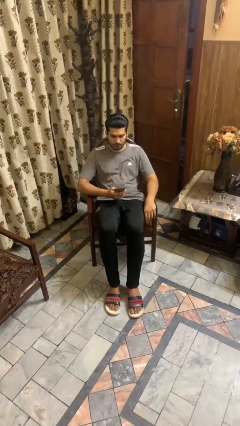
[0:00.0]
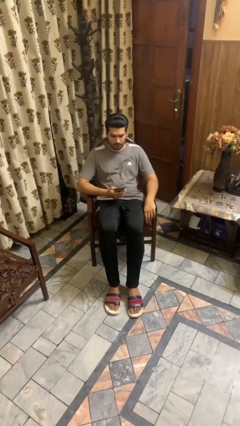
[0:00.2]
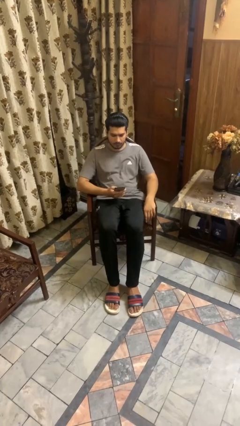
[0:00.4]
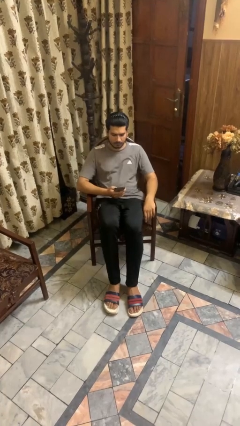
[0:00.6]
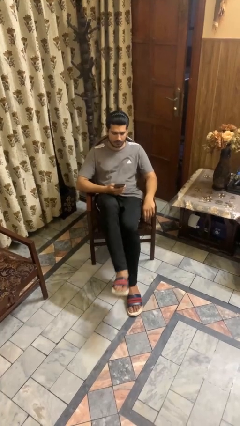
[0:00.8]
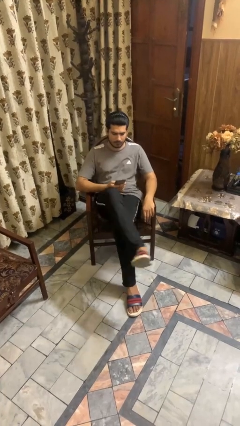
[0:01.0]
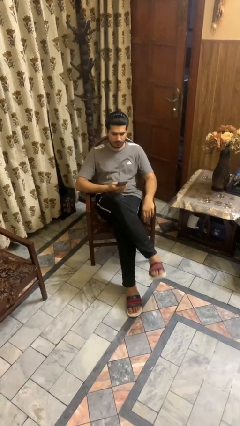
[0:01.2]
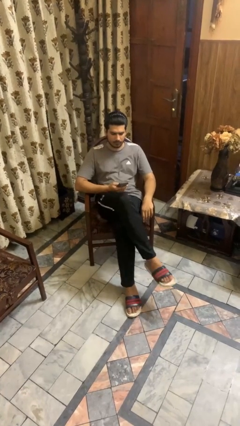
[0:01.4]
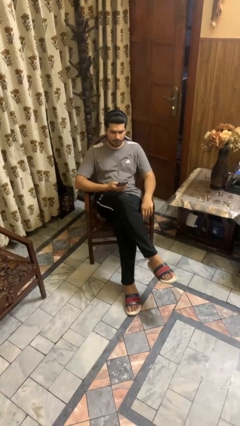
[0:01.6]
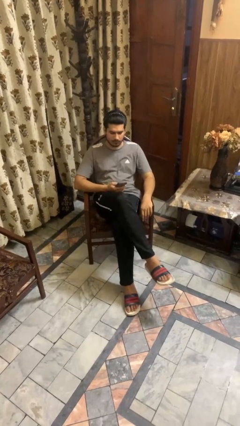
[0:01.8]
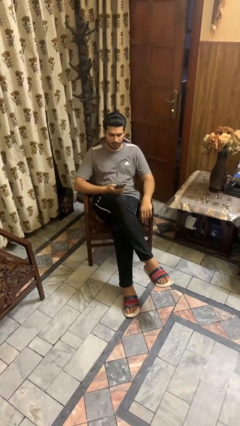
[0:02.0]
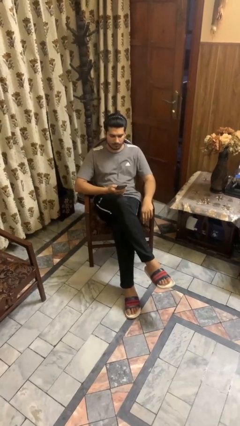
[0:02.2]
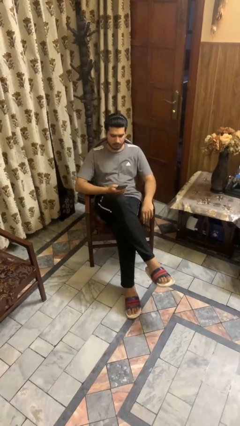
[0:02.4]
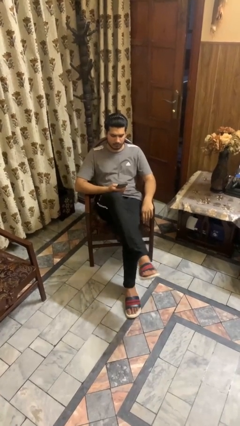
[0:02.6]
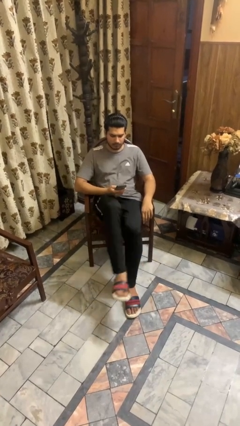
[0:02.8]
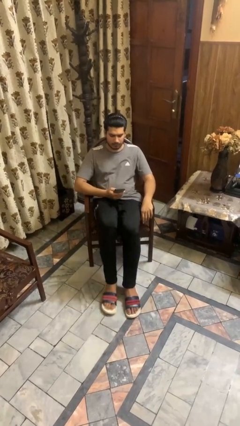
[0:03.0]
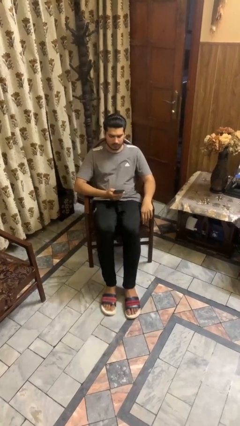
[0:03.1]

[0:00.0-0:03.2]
person crosses legs

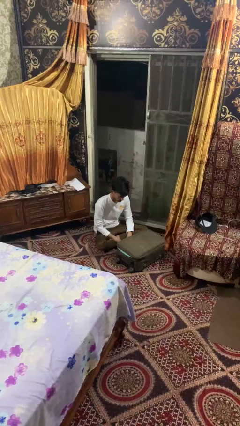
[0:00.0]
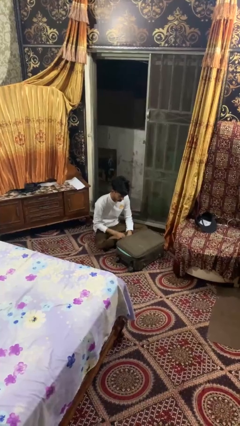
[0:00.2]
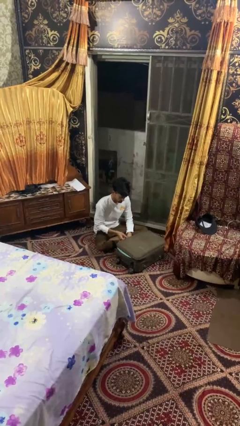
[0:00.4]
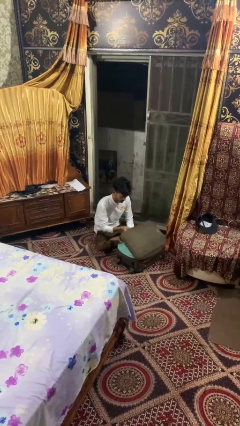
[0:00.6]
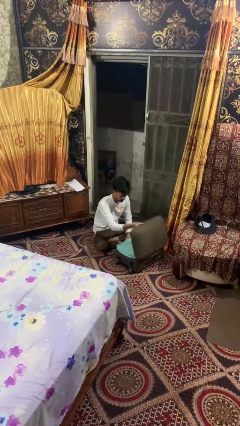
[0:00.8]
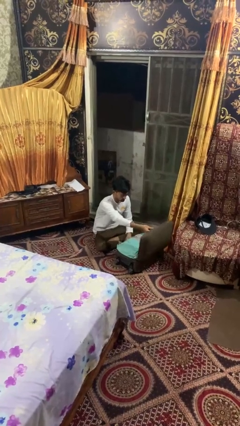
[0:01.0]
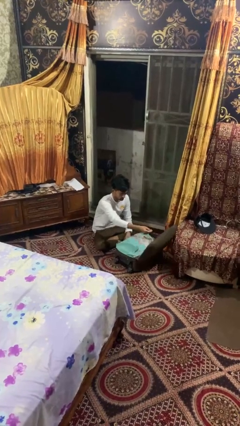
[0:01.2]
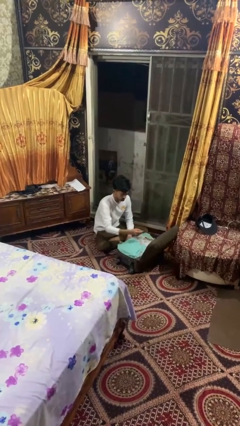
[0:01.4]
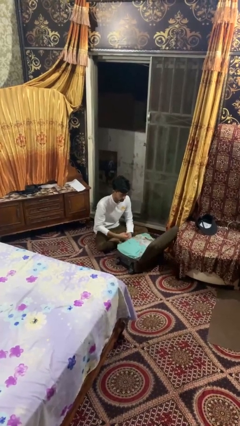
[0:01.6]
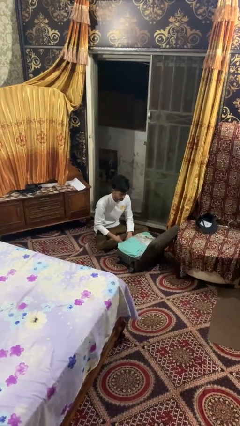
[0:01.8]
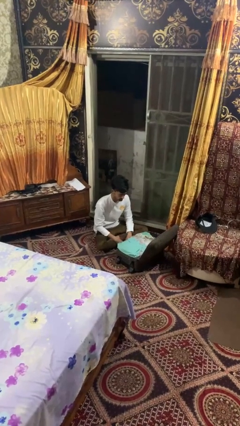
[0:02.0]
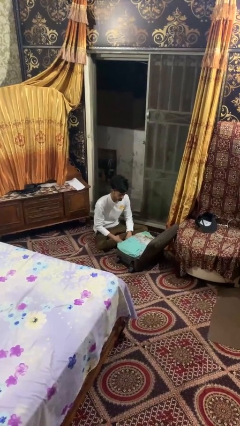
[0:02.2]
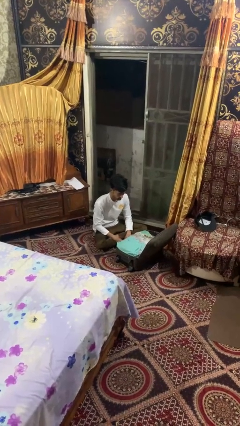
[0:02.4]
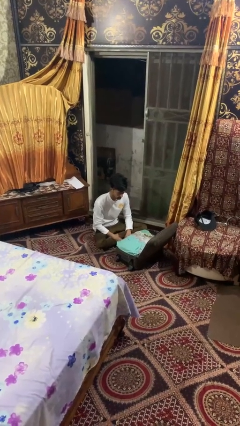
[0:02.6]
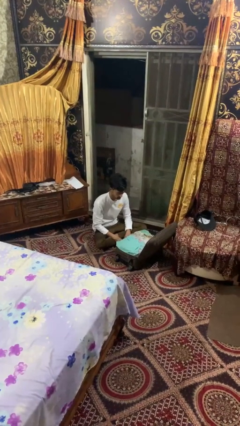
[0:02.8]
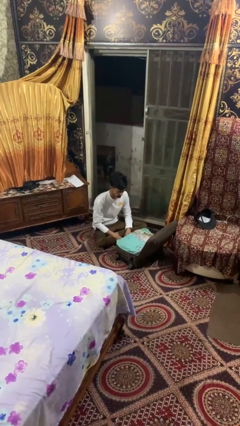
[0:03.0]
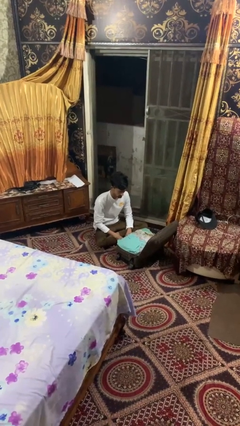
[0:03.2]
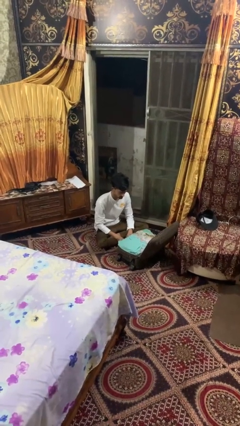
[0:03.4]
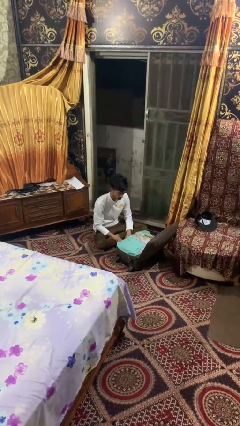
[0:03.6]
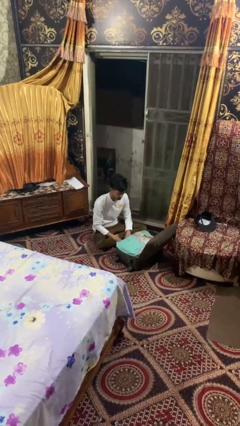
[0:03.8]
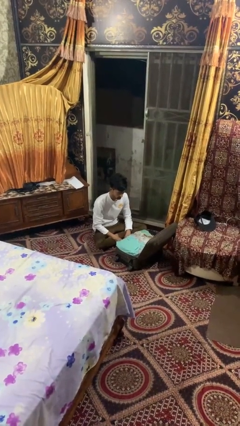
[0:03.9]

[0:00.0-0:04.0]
person opens suitcase

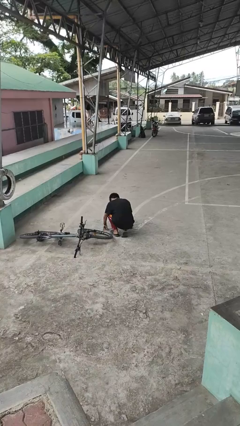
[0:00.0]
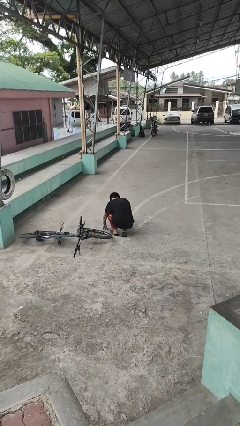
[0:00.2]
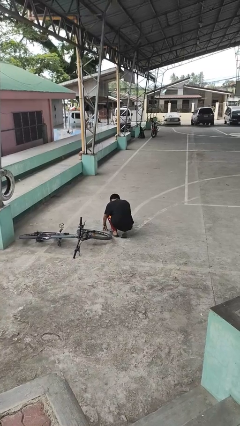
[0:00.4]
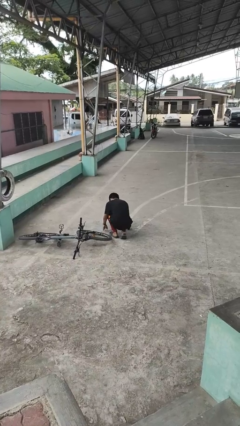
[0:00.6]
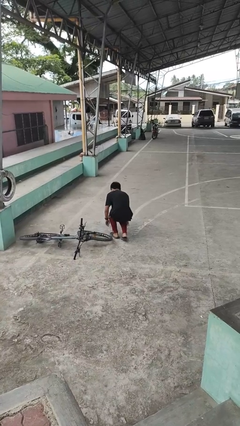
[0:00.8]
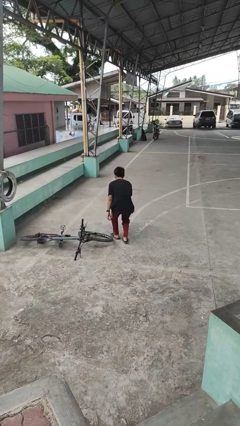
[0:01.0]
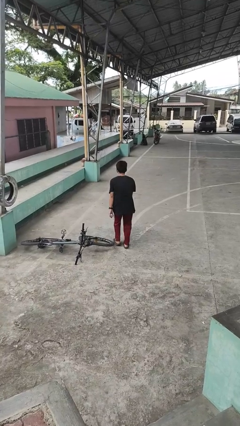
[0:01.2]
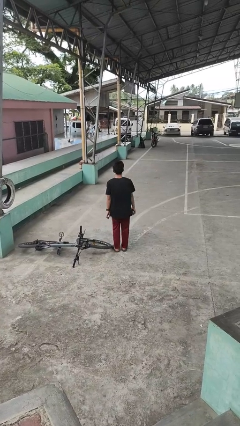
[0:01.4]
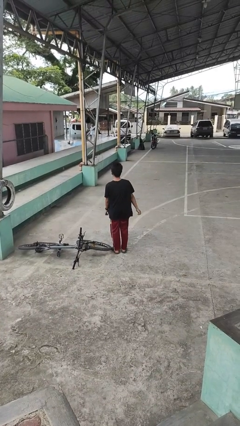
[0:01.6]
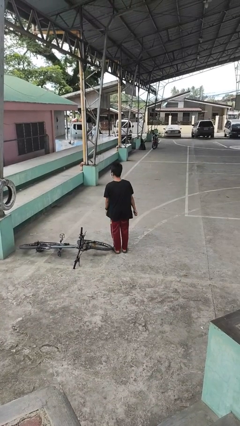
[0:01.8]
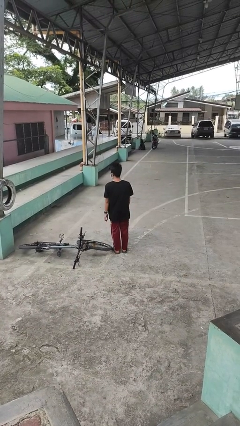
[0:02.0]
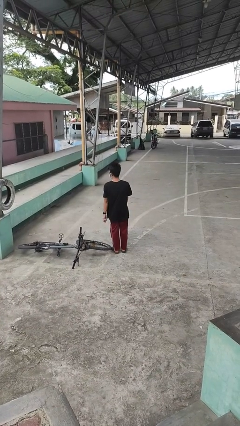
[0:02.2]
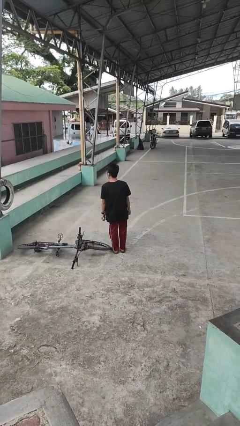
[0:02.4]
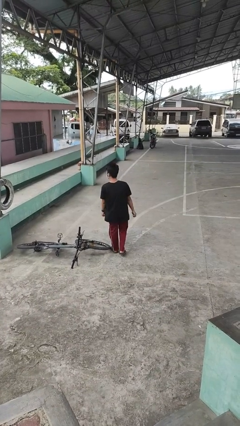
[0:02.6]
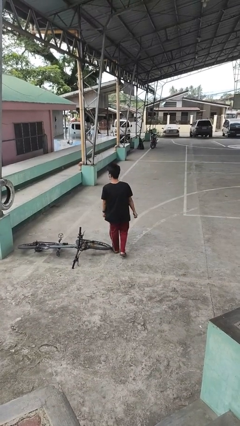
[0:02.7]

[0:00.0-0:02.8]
person stands up from floor

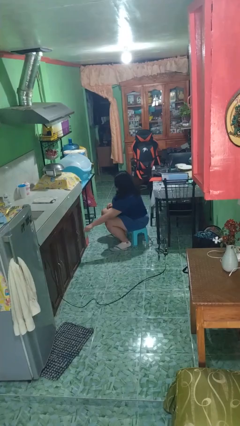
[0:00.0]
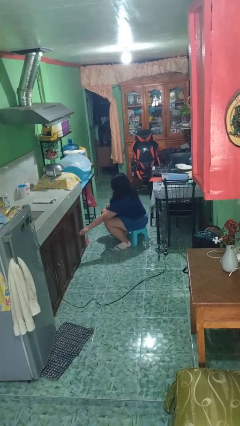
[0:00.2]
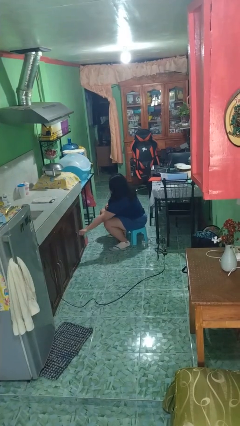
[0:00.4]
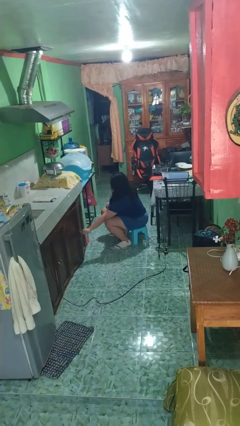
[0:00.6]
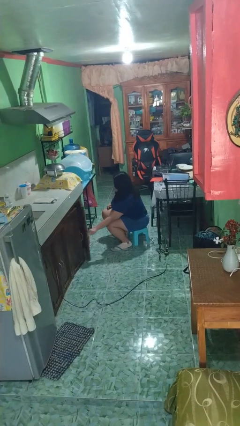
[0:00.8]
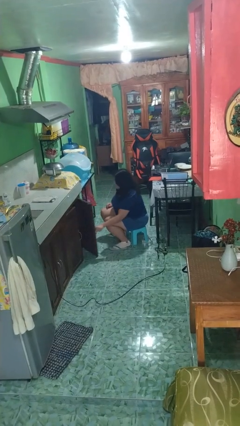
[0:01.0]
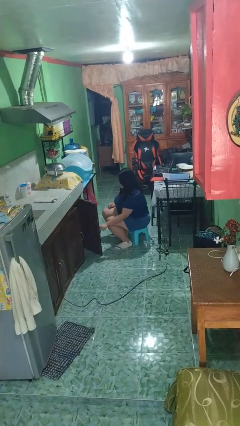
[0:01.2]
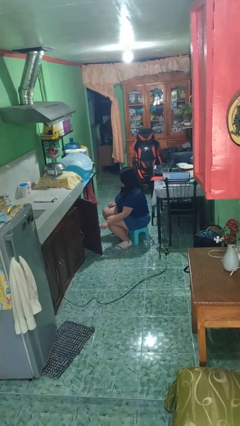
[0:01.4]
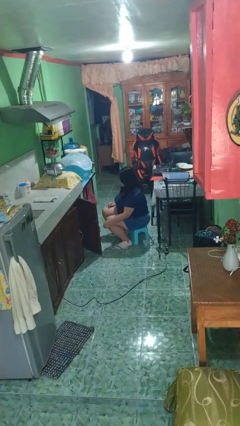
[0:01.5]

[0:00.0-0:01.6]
person opens cabinet

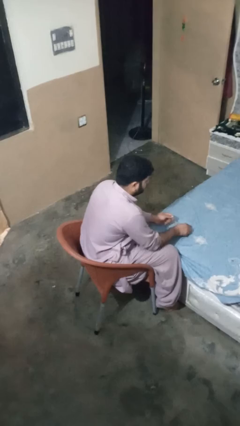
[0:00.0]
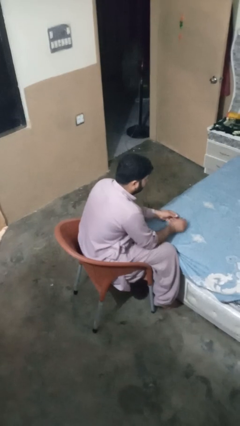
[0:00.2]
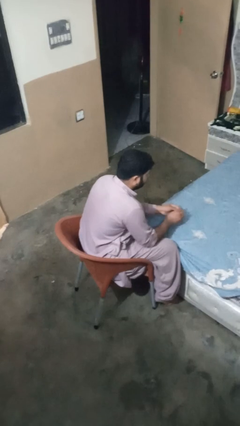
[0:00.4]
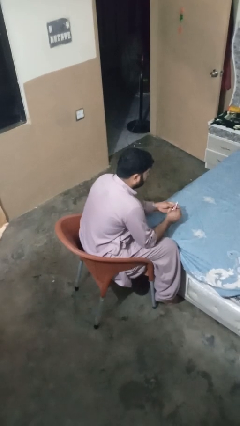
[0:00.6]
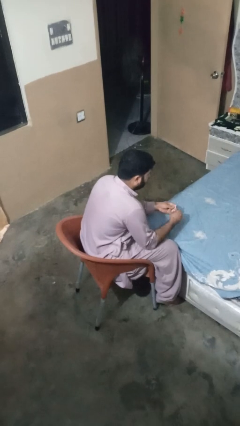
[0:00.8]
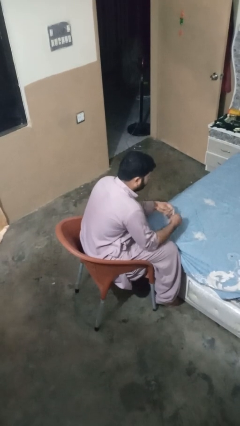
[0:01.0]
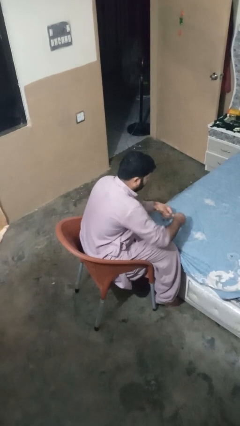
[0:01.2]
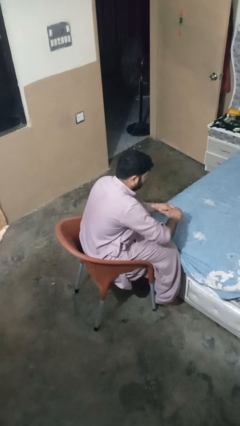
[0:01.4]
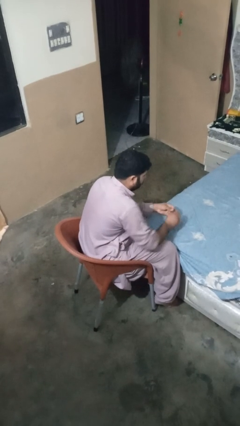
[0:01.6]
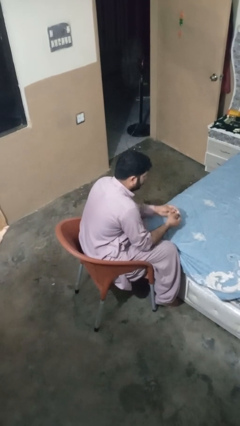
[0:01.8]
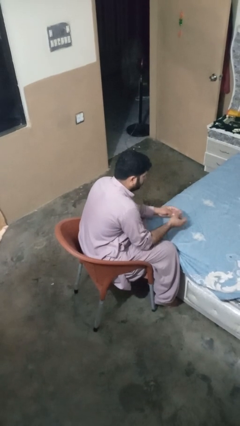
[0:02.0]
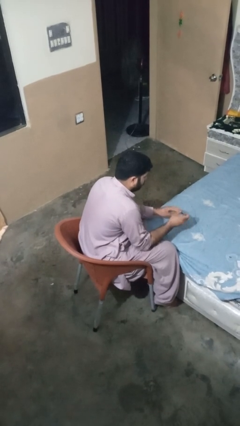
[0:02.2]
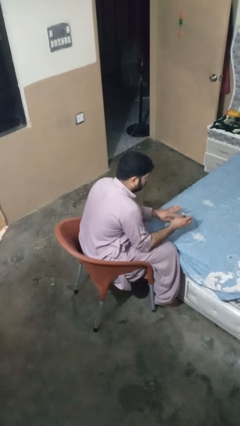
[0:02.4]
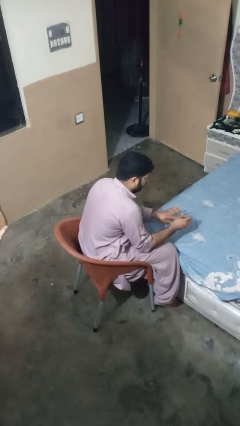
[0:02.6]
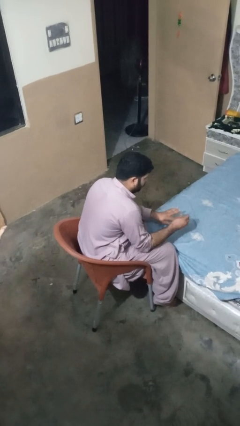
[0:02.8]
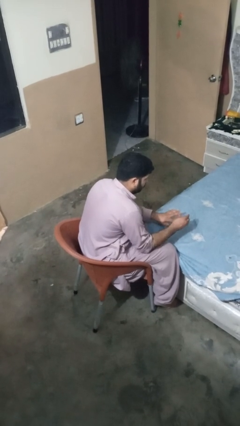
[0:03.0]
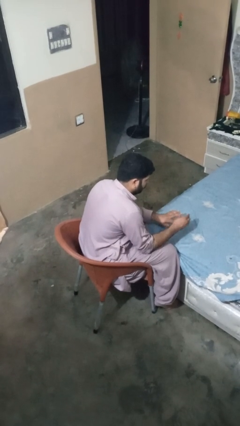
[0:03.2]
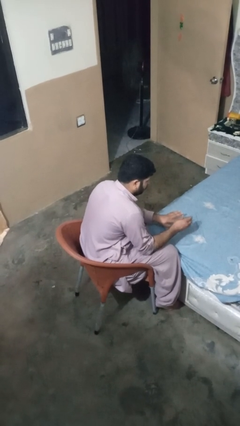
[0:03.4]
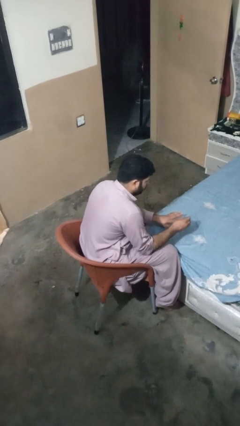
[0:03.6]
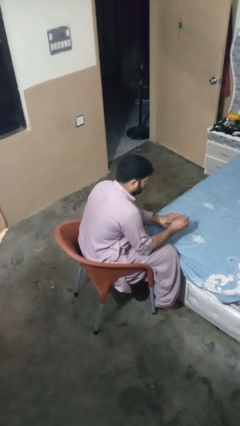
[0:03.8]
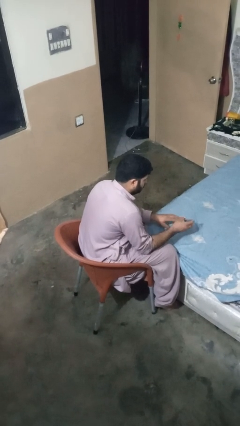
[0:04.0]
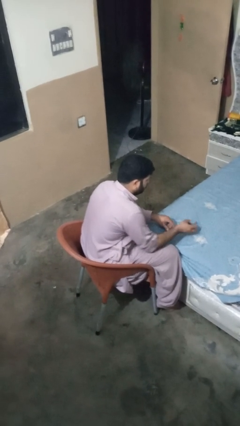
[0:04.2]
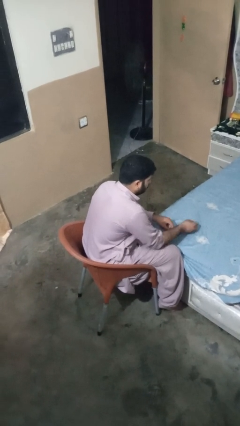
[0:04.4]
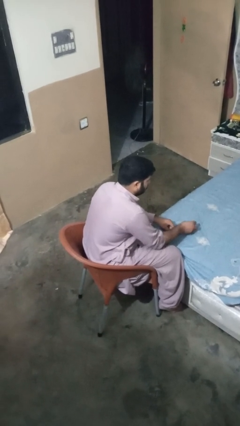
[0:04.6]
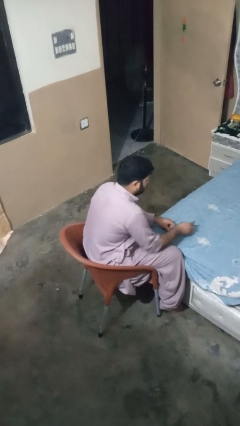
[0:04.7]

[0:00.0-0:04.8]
person clips fingernails

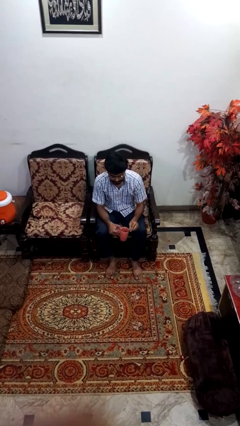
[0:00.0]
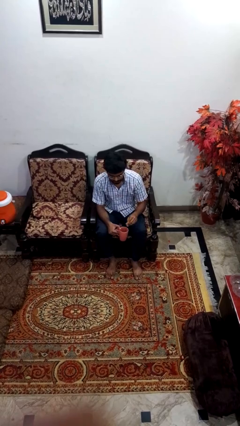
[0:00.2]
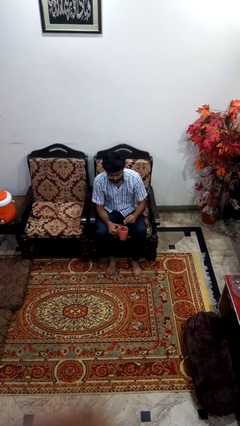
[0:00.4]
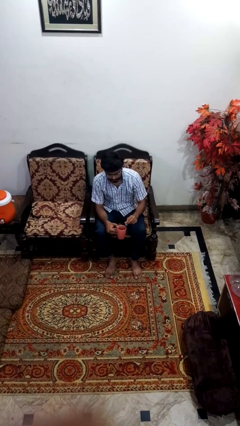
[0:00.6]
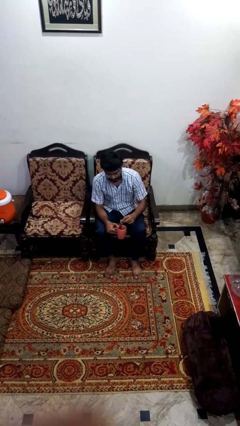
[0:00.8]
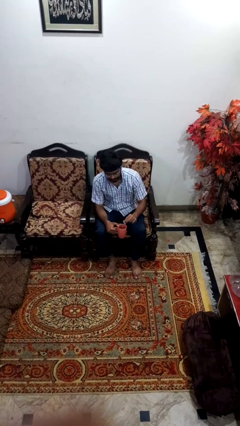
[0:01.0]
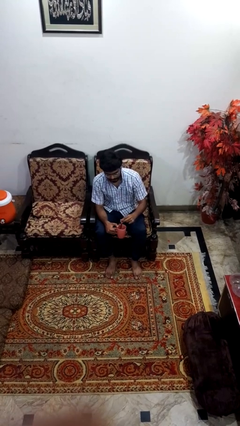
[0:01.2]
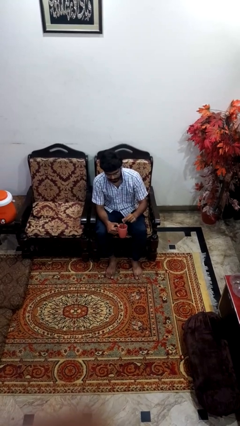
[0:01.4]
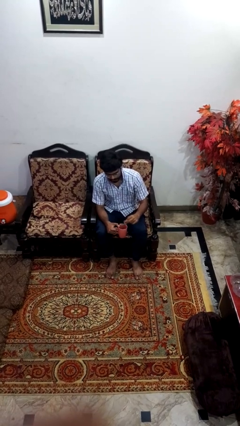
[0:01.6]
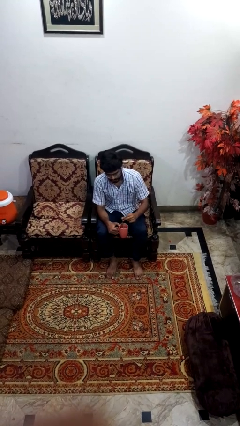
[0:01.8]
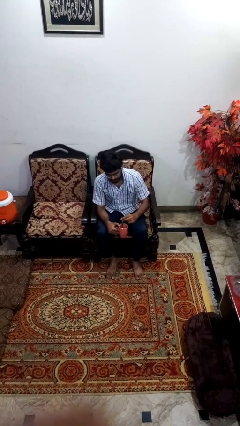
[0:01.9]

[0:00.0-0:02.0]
person stirs mug
